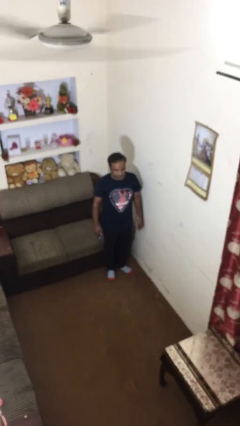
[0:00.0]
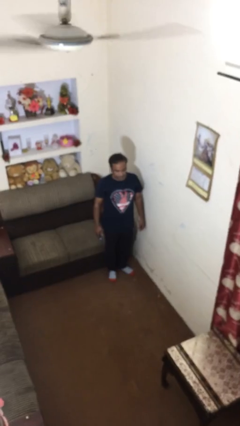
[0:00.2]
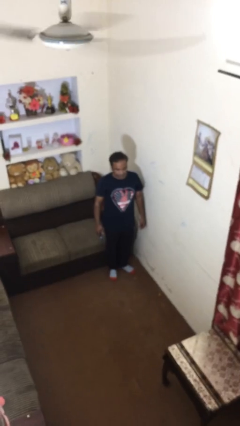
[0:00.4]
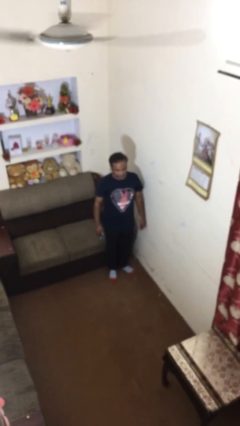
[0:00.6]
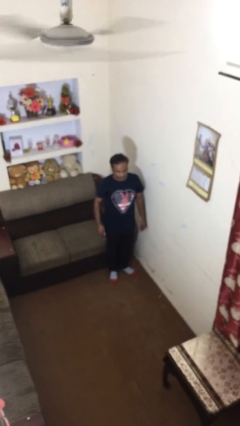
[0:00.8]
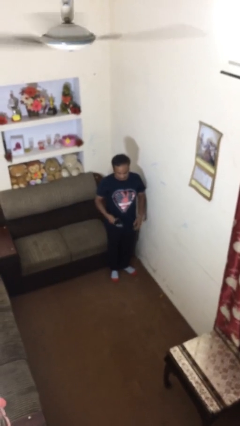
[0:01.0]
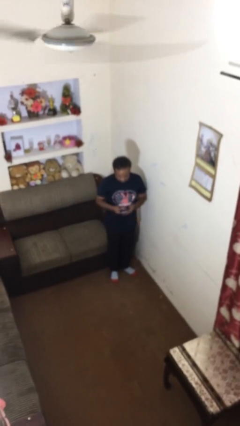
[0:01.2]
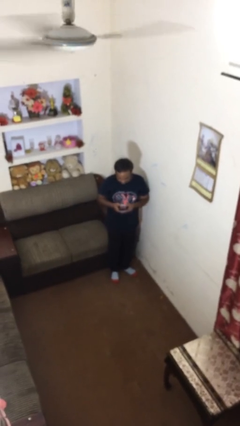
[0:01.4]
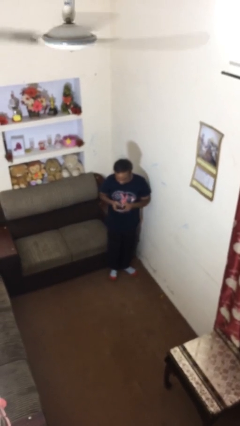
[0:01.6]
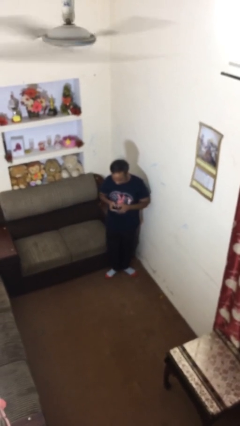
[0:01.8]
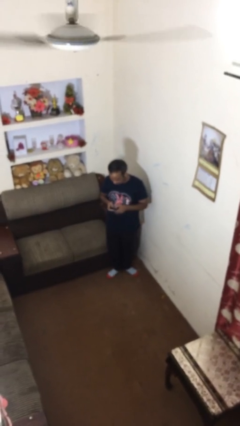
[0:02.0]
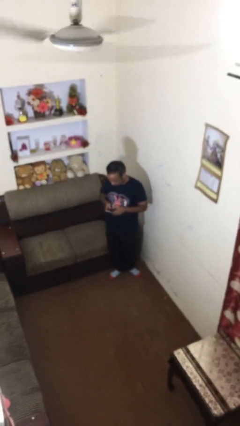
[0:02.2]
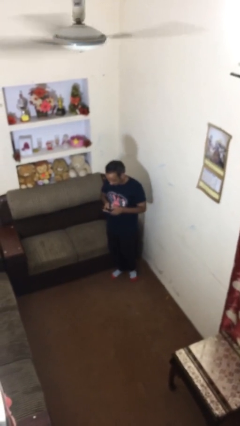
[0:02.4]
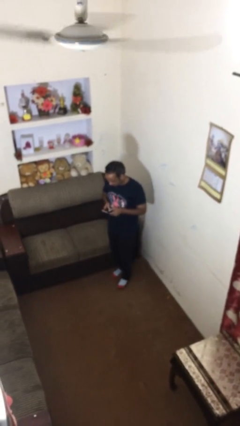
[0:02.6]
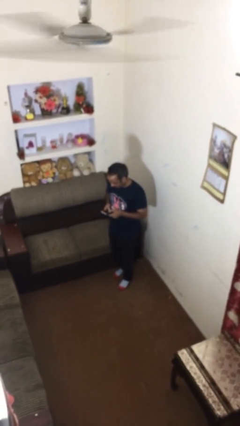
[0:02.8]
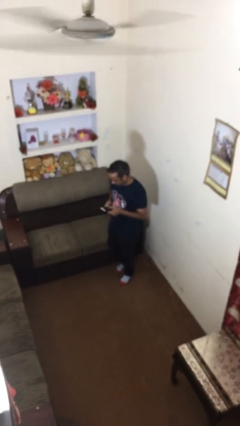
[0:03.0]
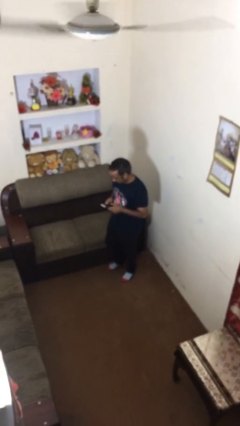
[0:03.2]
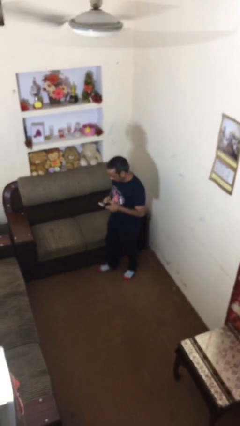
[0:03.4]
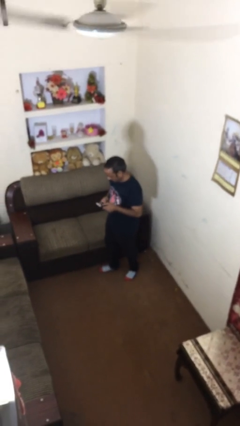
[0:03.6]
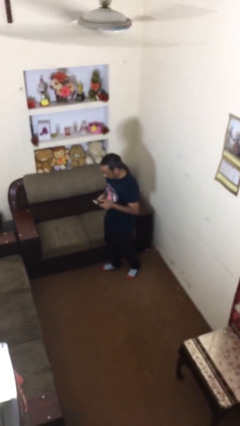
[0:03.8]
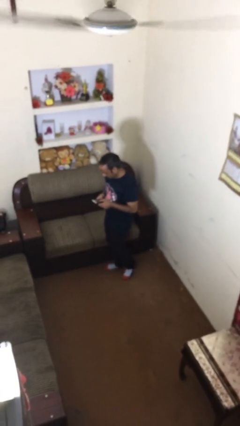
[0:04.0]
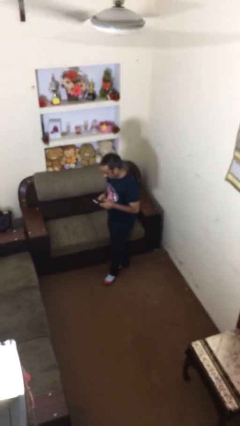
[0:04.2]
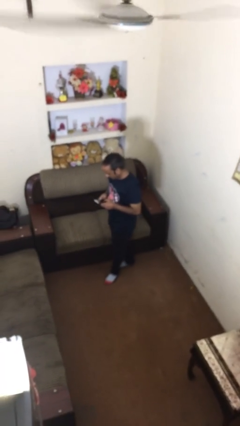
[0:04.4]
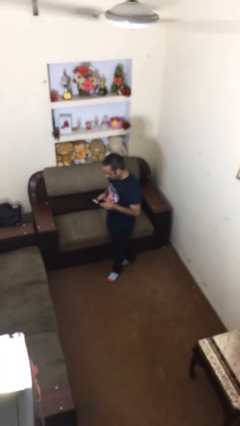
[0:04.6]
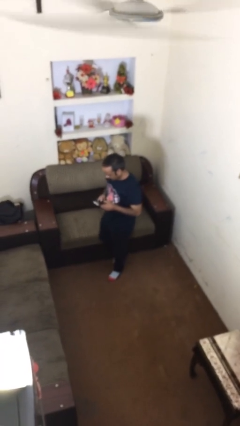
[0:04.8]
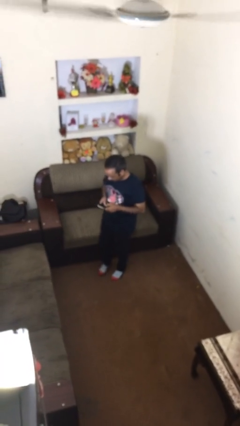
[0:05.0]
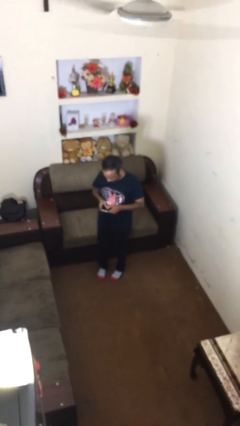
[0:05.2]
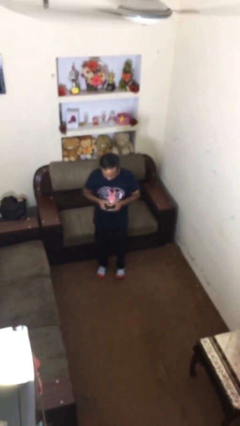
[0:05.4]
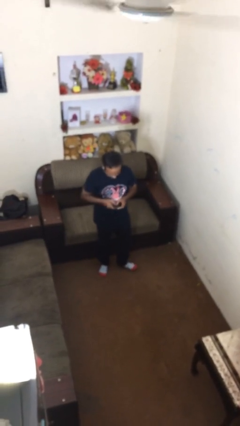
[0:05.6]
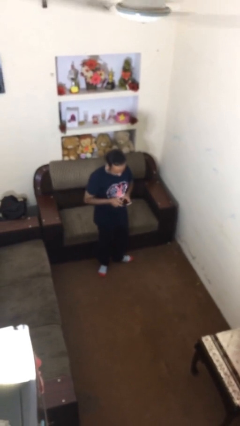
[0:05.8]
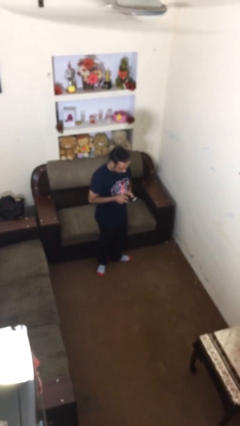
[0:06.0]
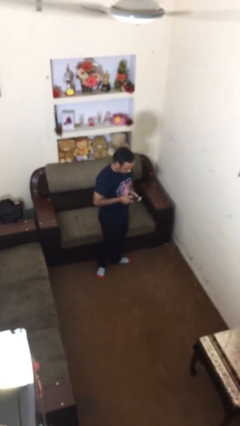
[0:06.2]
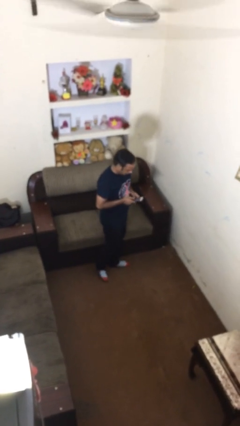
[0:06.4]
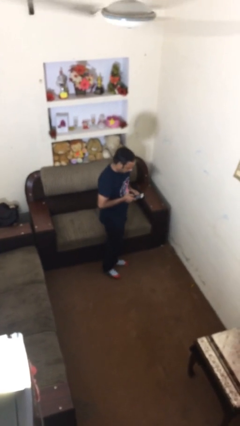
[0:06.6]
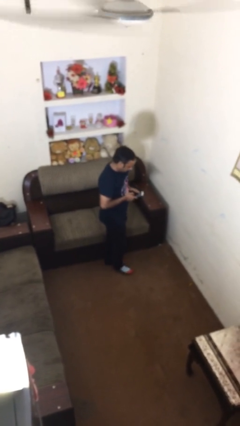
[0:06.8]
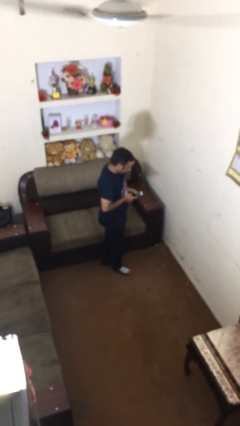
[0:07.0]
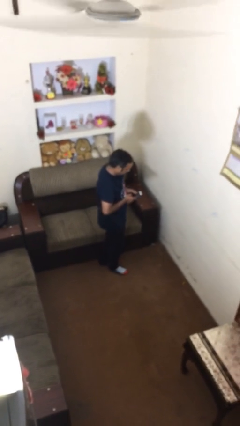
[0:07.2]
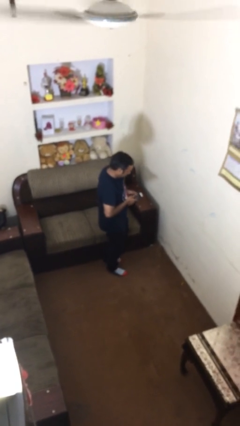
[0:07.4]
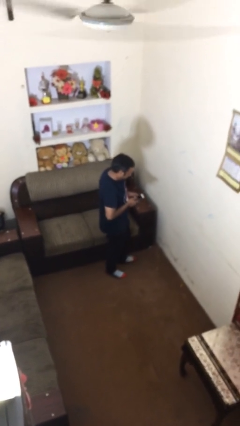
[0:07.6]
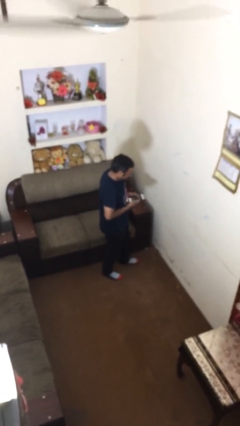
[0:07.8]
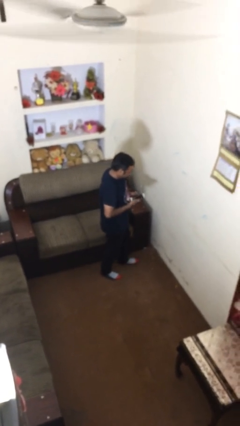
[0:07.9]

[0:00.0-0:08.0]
person texts on phone

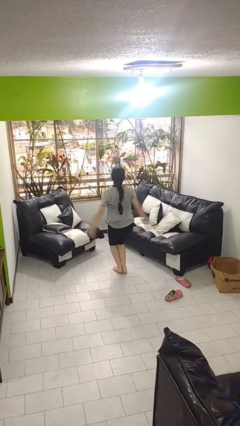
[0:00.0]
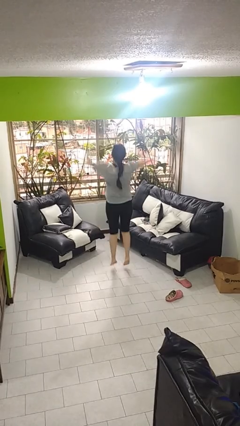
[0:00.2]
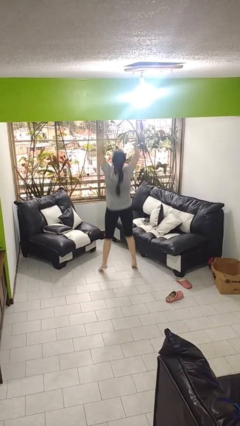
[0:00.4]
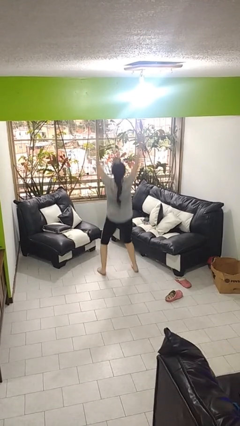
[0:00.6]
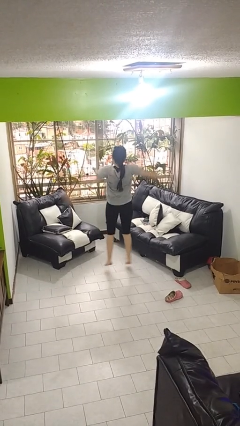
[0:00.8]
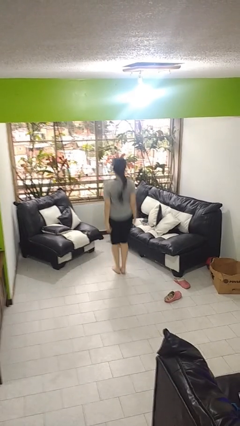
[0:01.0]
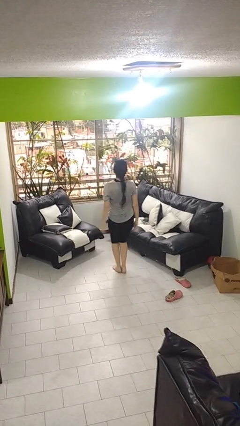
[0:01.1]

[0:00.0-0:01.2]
person exercises with jumping jacks

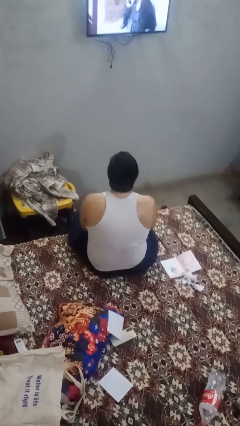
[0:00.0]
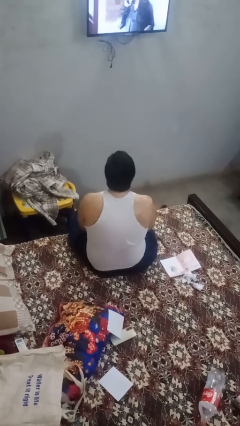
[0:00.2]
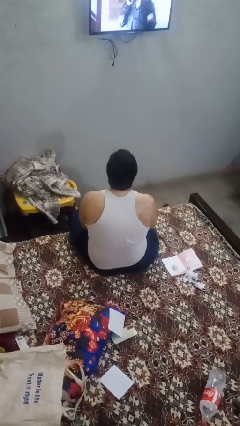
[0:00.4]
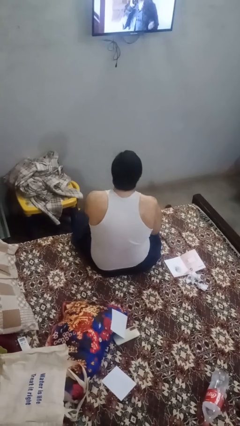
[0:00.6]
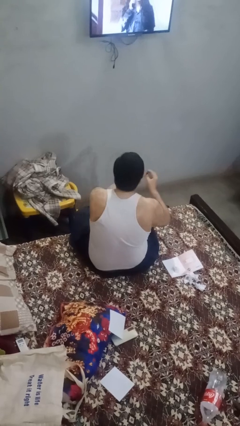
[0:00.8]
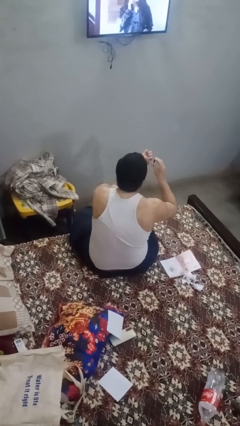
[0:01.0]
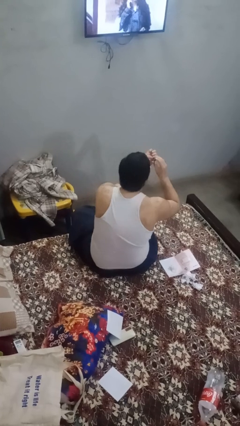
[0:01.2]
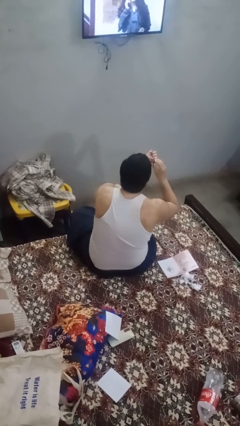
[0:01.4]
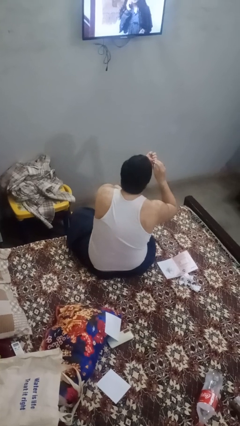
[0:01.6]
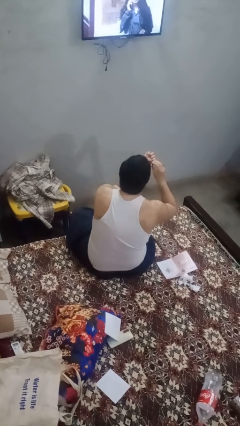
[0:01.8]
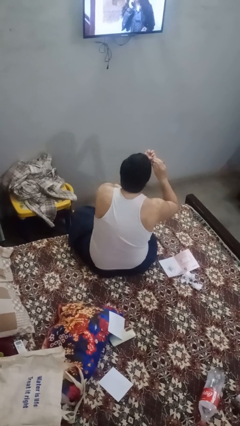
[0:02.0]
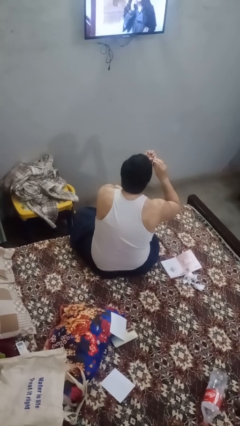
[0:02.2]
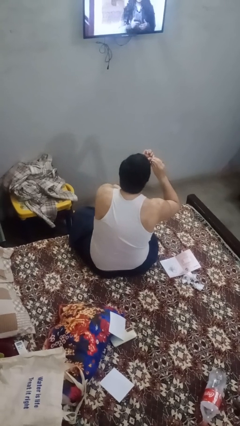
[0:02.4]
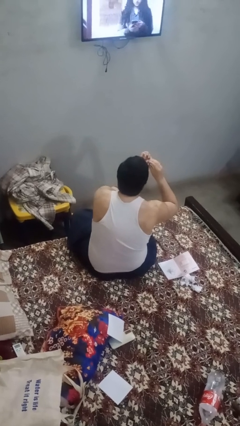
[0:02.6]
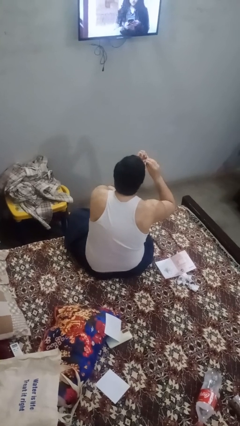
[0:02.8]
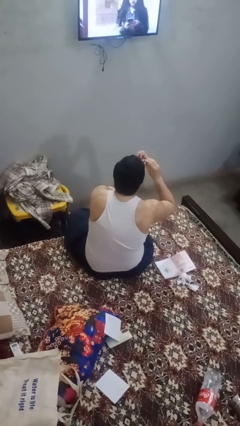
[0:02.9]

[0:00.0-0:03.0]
person clips fingernails

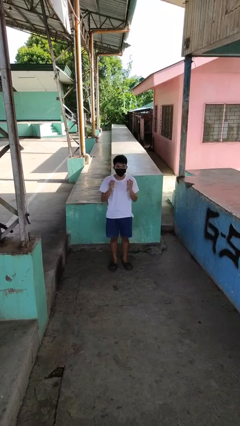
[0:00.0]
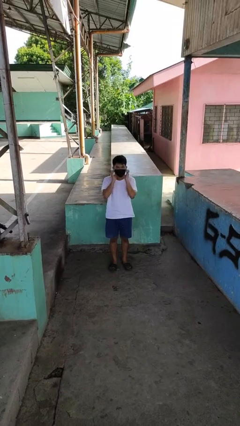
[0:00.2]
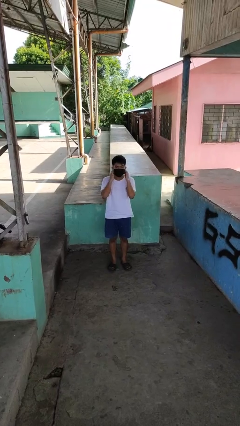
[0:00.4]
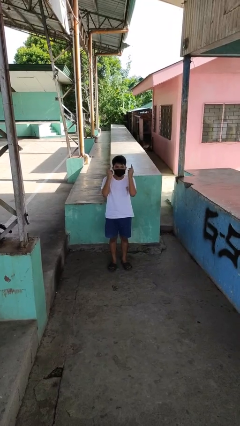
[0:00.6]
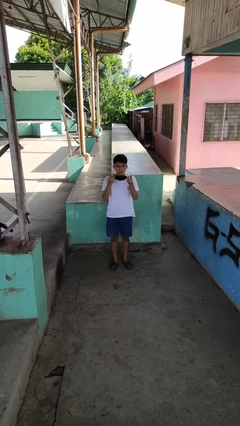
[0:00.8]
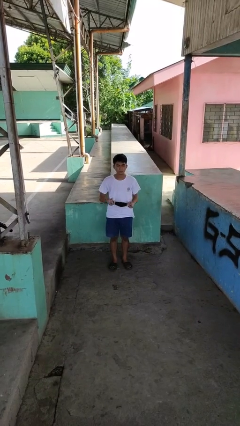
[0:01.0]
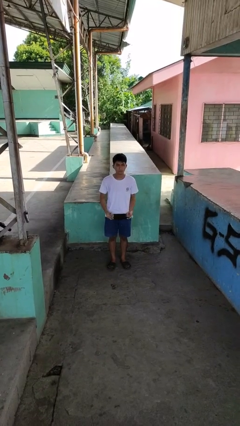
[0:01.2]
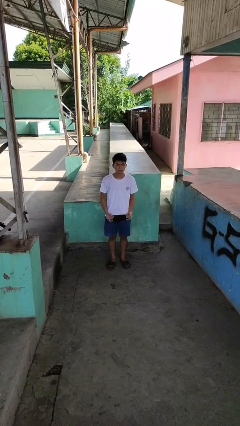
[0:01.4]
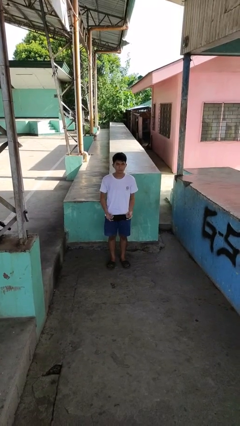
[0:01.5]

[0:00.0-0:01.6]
person takes off facemask

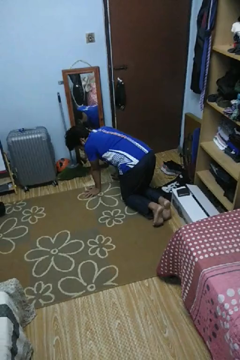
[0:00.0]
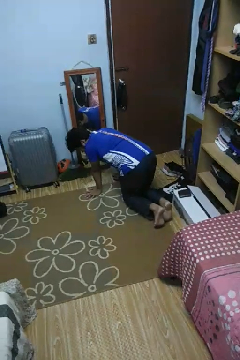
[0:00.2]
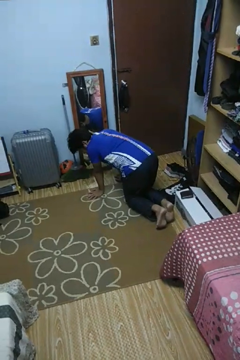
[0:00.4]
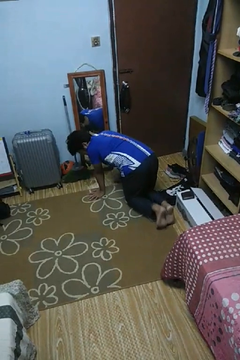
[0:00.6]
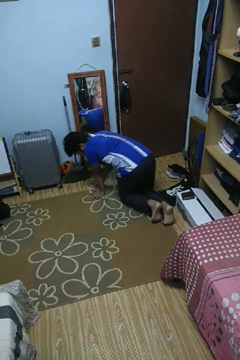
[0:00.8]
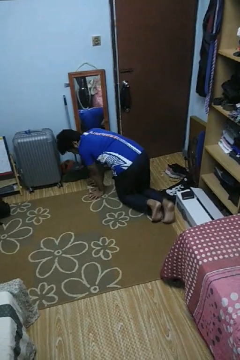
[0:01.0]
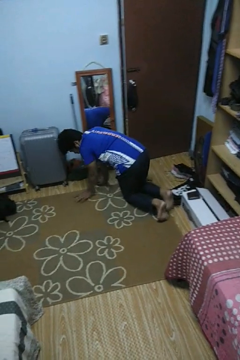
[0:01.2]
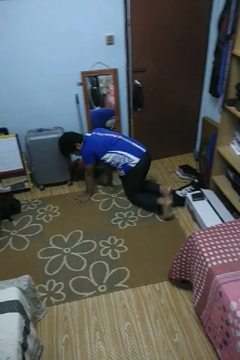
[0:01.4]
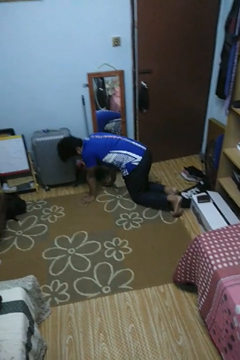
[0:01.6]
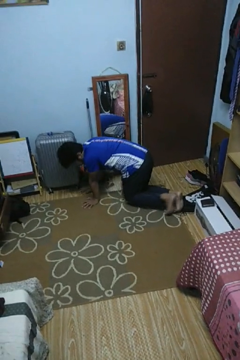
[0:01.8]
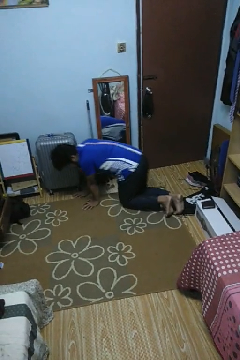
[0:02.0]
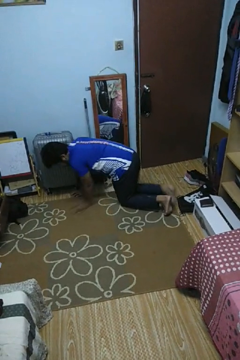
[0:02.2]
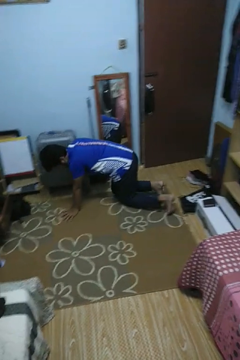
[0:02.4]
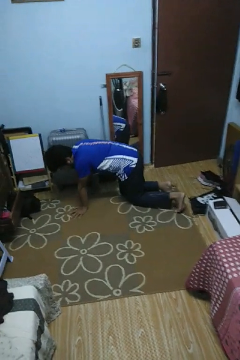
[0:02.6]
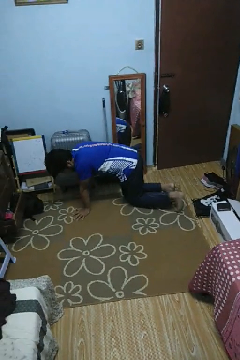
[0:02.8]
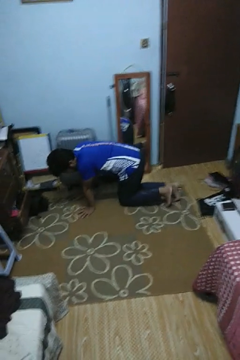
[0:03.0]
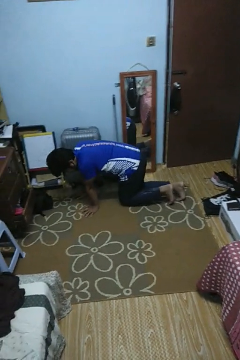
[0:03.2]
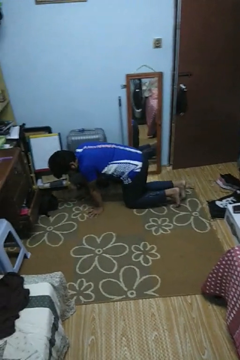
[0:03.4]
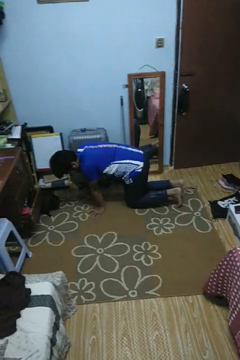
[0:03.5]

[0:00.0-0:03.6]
person crawls

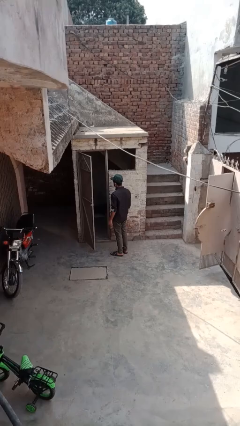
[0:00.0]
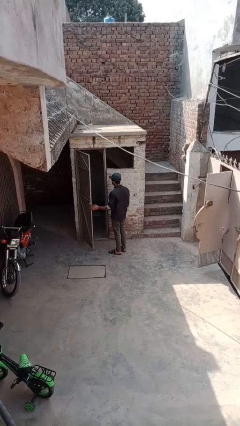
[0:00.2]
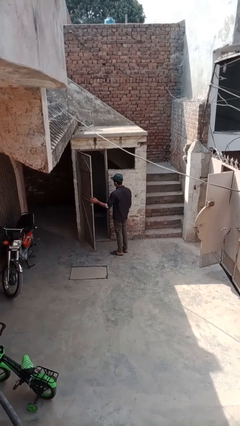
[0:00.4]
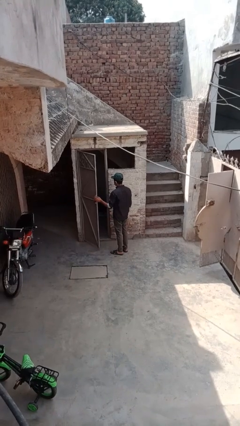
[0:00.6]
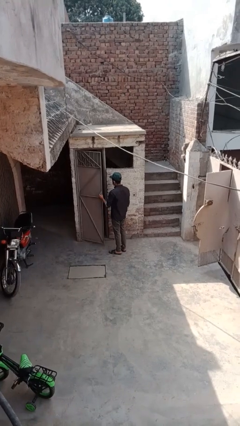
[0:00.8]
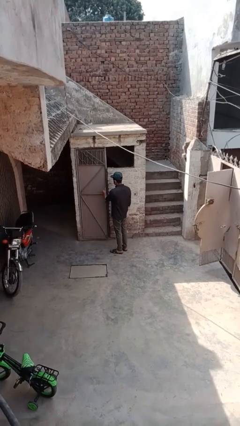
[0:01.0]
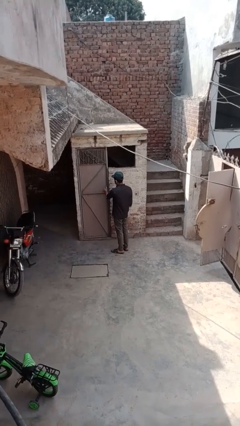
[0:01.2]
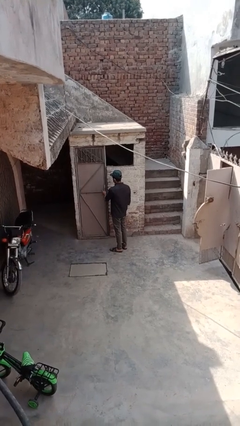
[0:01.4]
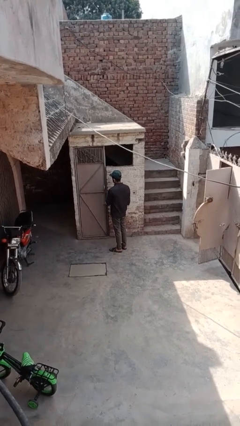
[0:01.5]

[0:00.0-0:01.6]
person closes facility door
